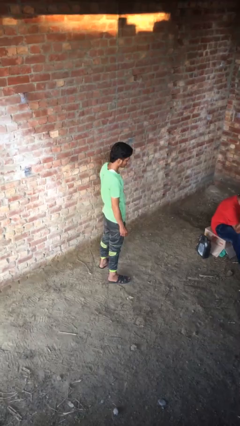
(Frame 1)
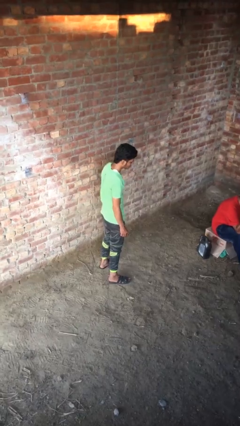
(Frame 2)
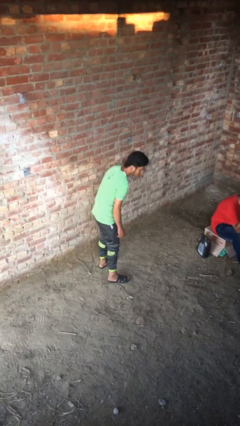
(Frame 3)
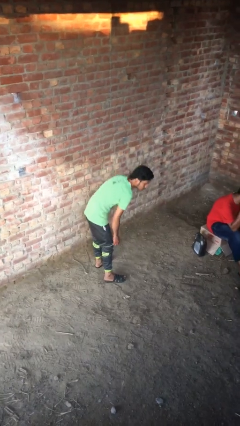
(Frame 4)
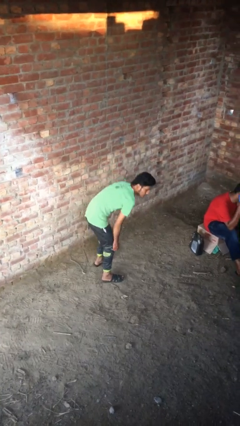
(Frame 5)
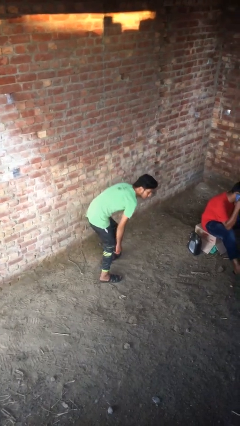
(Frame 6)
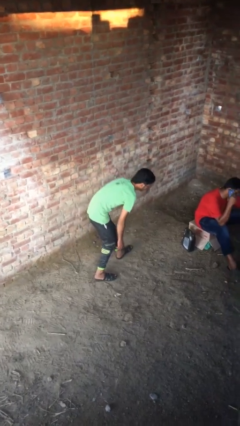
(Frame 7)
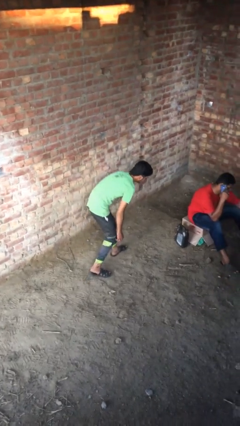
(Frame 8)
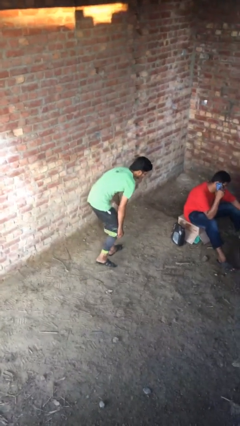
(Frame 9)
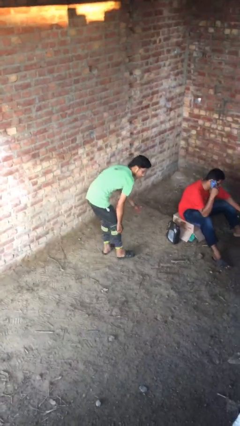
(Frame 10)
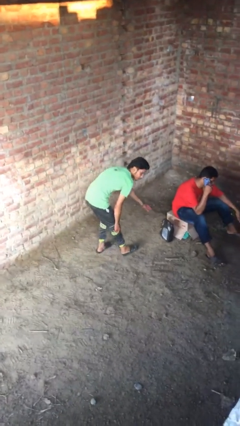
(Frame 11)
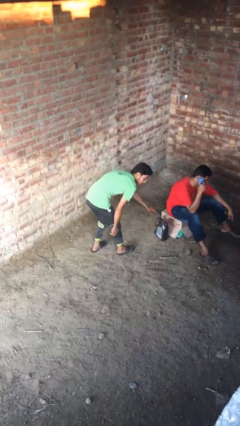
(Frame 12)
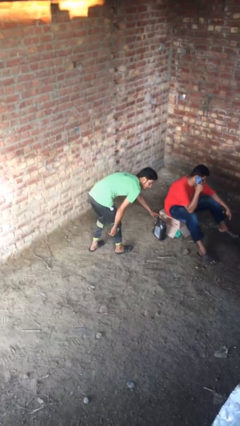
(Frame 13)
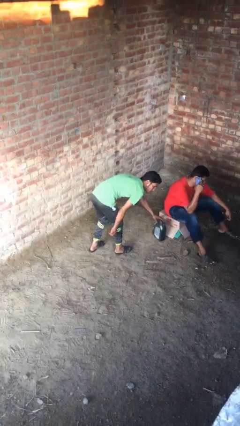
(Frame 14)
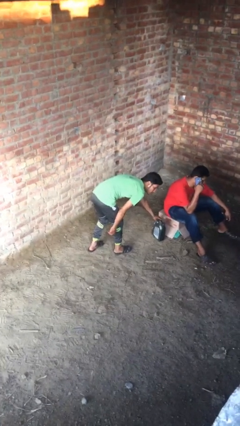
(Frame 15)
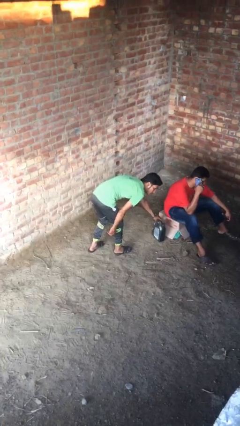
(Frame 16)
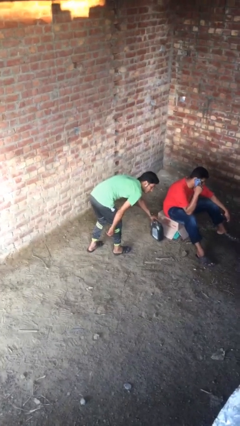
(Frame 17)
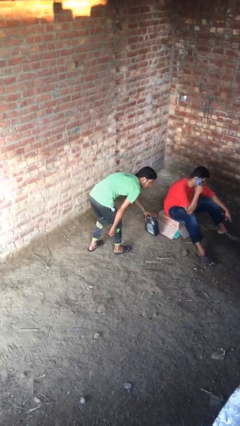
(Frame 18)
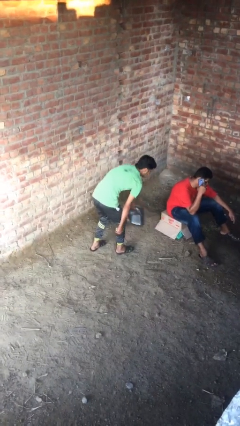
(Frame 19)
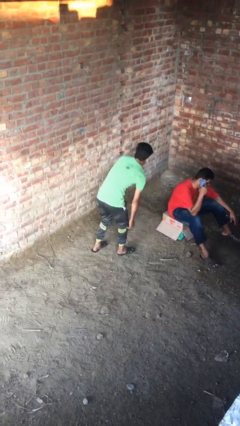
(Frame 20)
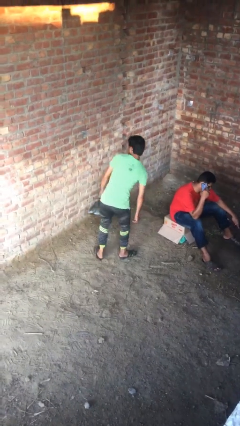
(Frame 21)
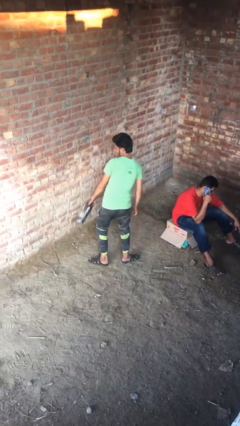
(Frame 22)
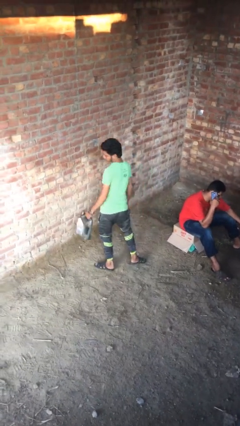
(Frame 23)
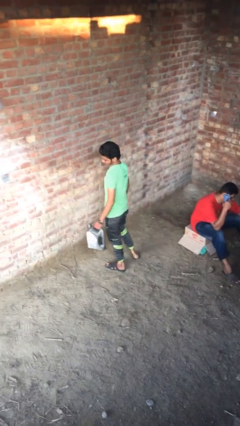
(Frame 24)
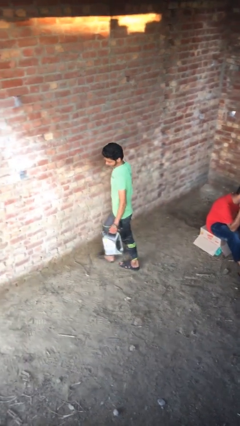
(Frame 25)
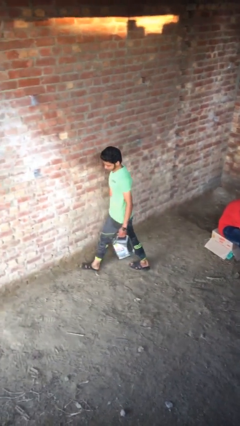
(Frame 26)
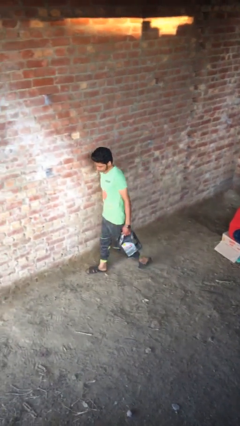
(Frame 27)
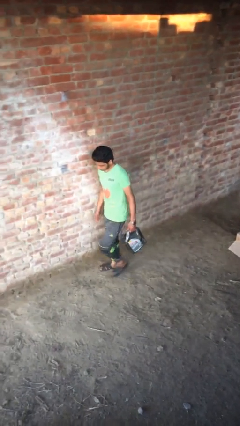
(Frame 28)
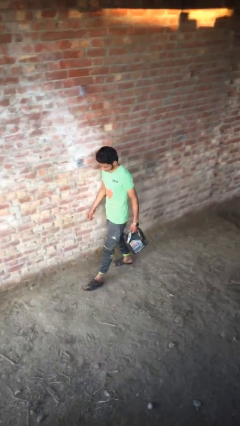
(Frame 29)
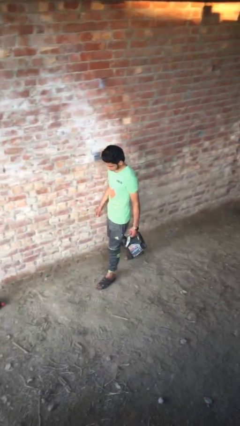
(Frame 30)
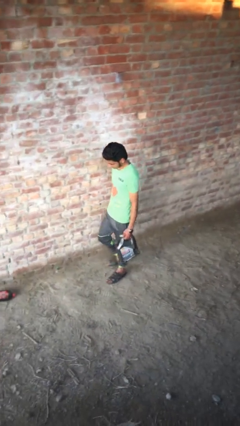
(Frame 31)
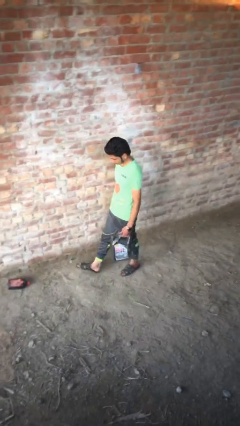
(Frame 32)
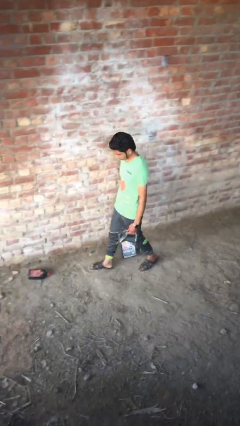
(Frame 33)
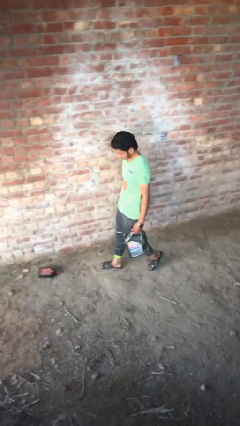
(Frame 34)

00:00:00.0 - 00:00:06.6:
person steals object from person

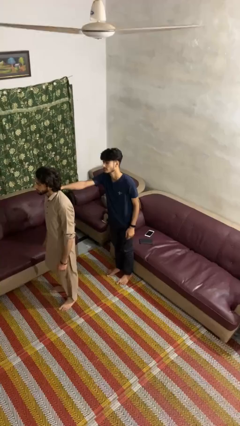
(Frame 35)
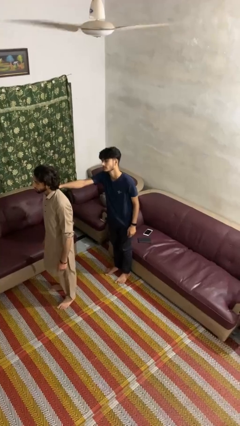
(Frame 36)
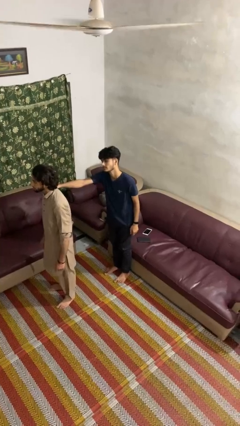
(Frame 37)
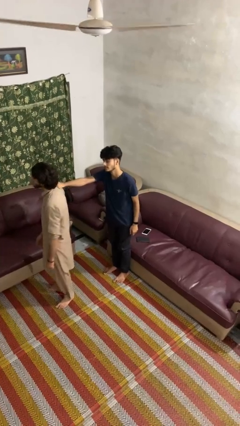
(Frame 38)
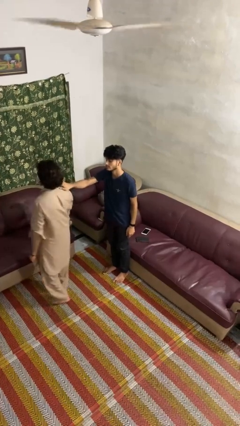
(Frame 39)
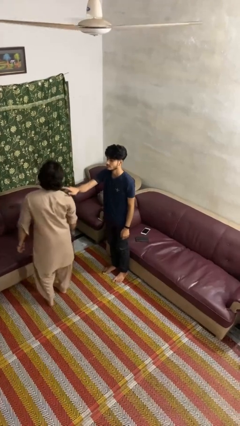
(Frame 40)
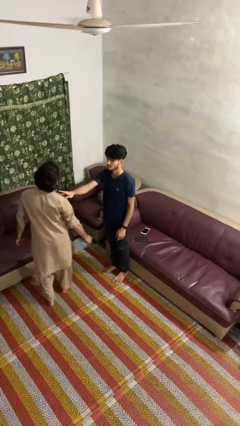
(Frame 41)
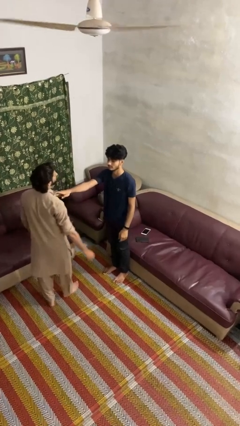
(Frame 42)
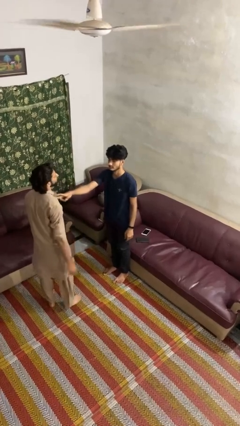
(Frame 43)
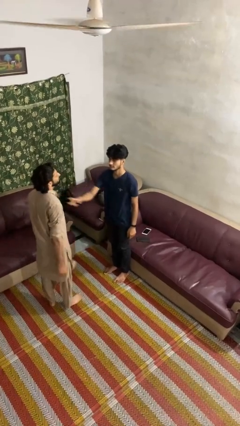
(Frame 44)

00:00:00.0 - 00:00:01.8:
person spins person around

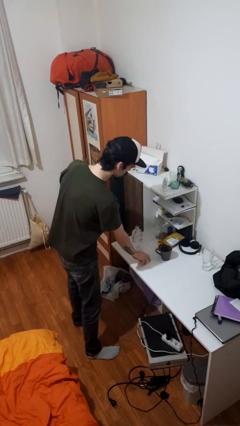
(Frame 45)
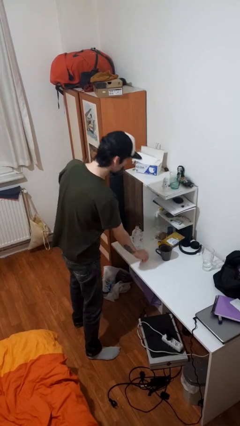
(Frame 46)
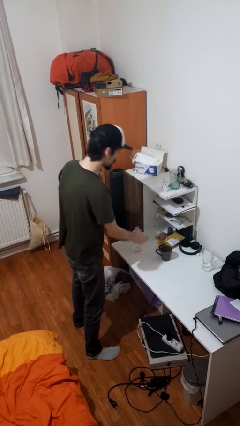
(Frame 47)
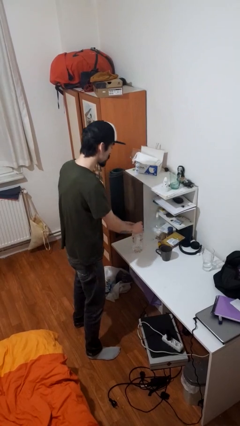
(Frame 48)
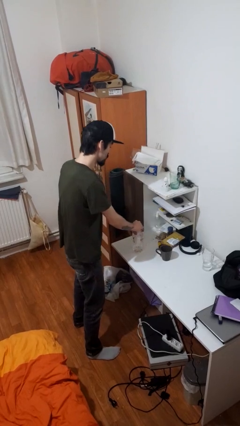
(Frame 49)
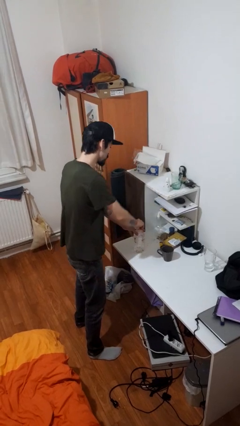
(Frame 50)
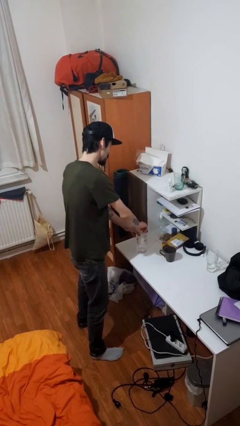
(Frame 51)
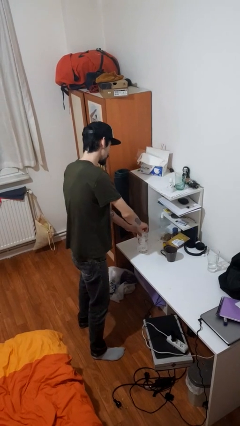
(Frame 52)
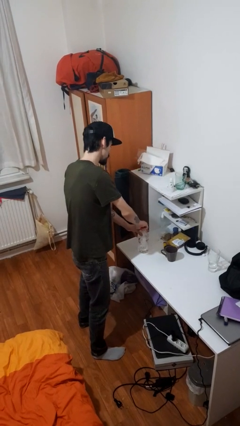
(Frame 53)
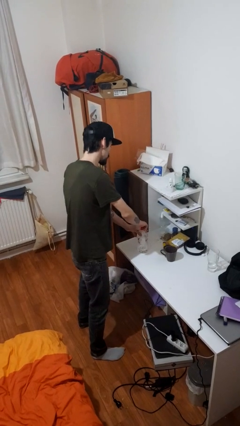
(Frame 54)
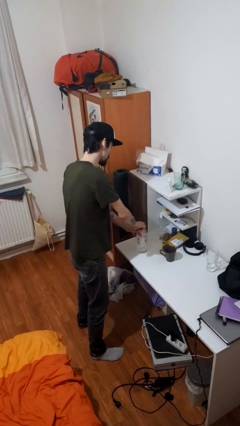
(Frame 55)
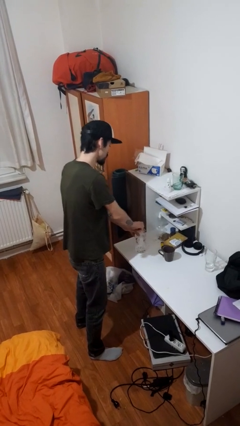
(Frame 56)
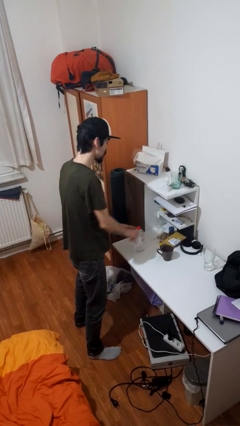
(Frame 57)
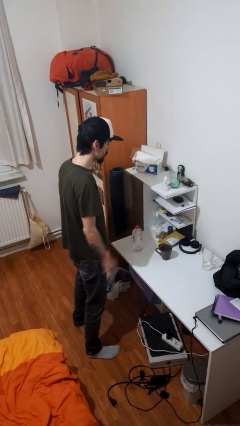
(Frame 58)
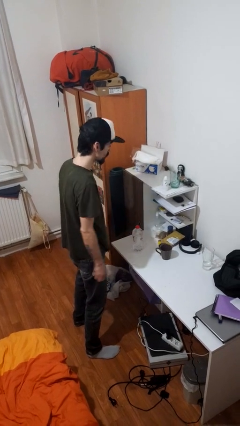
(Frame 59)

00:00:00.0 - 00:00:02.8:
person screws lid to bottle

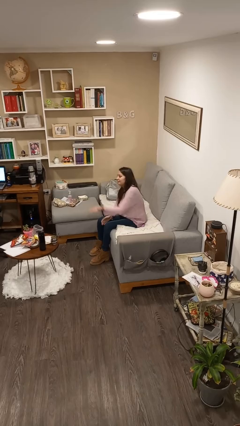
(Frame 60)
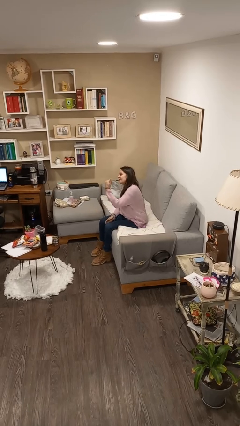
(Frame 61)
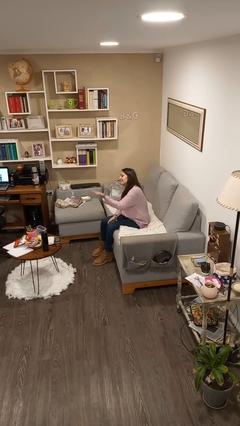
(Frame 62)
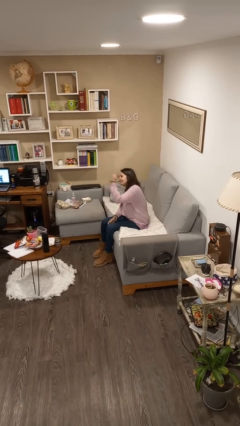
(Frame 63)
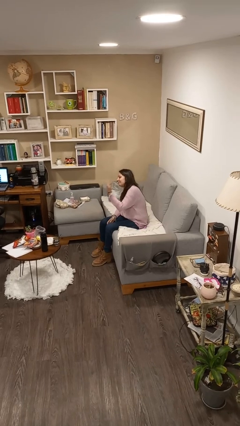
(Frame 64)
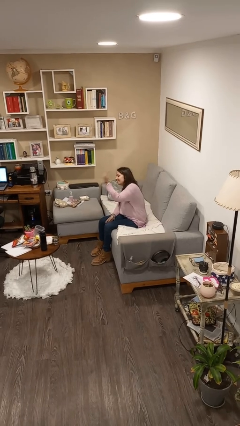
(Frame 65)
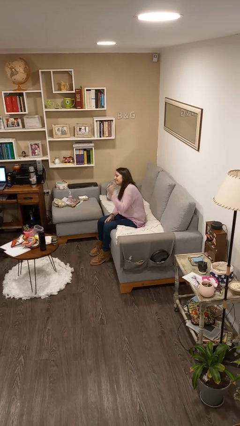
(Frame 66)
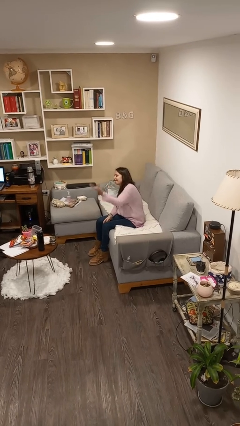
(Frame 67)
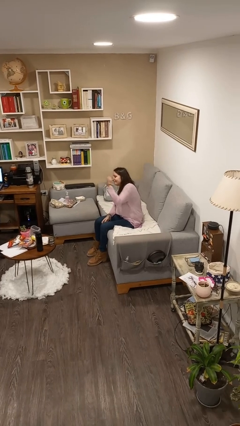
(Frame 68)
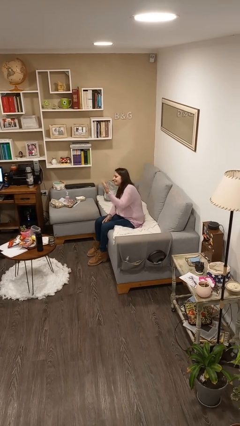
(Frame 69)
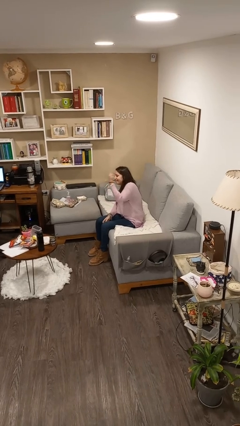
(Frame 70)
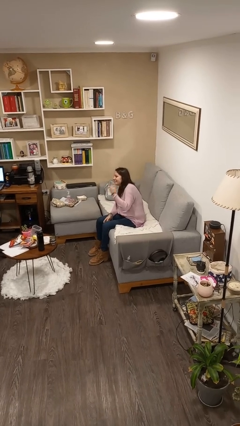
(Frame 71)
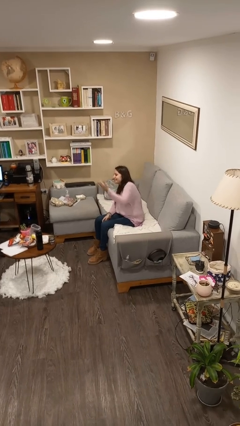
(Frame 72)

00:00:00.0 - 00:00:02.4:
person gestures come here

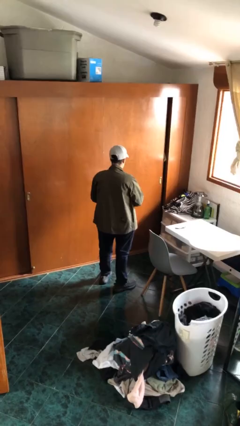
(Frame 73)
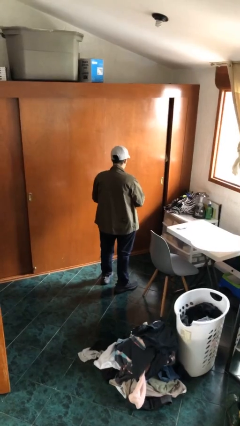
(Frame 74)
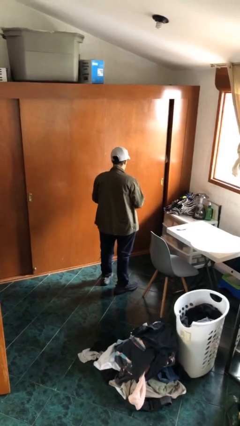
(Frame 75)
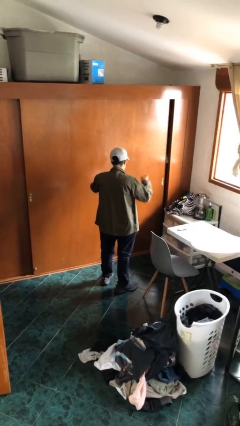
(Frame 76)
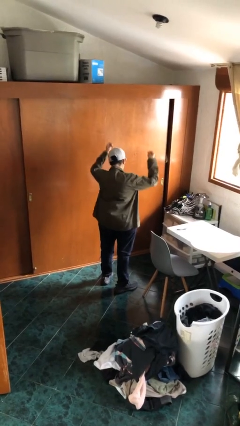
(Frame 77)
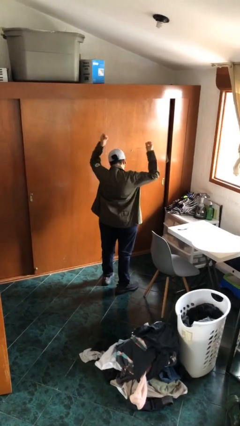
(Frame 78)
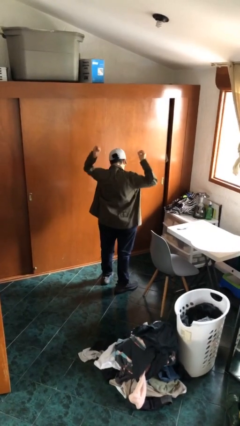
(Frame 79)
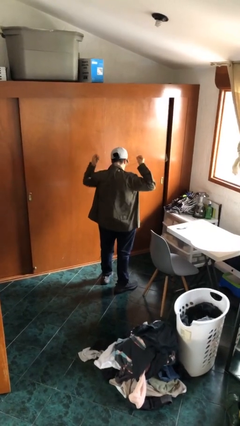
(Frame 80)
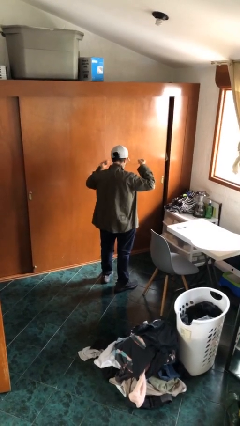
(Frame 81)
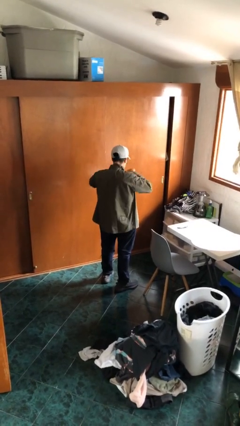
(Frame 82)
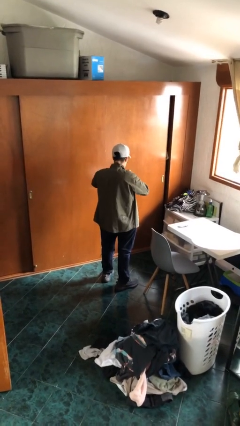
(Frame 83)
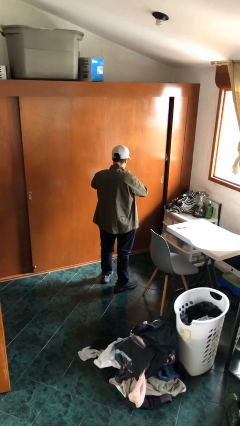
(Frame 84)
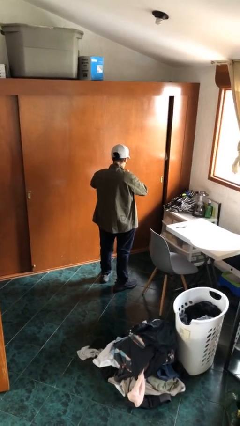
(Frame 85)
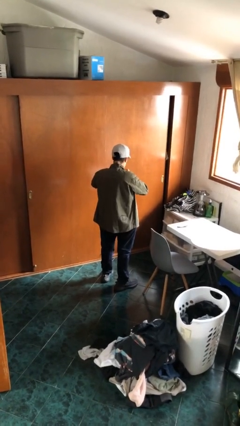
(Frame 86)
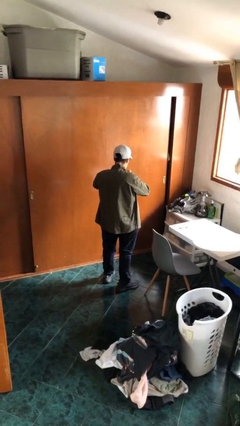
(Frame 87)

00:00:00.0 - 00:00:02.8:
person puts on necklace

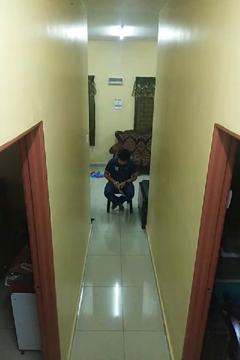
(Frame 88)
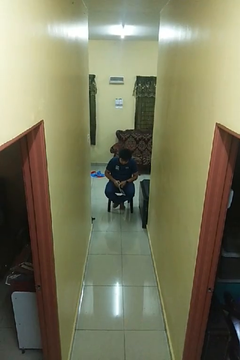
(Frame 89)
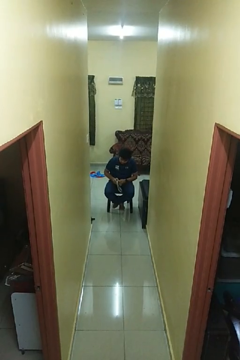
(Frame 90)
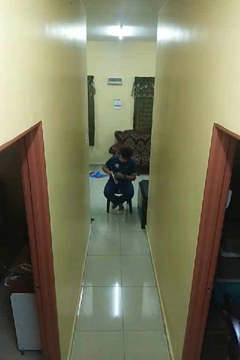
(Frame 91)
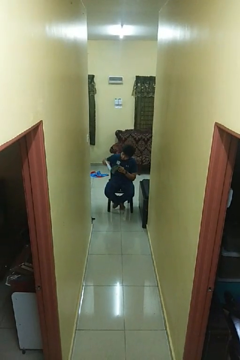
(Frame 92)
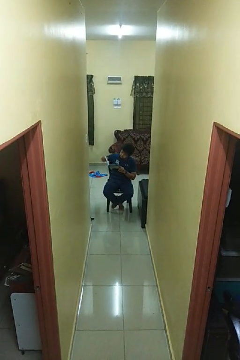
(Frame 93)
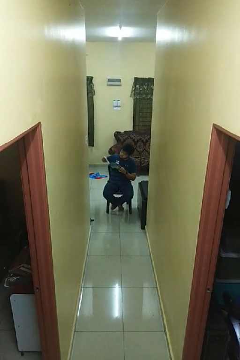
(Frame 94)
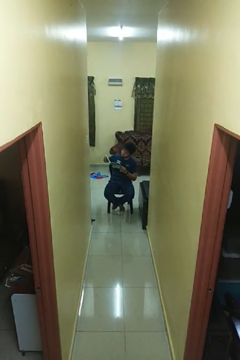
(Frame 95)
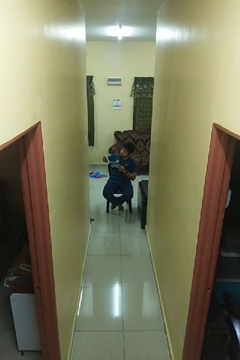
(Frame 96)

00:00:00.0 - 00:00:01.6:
person reads magazine
